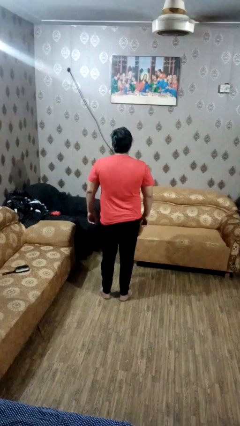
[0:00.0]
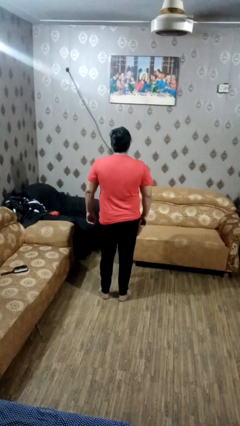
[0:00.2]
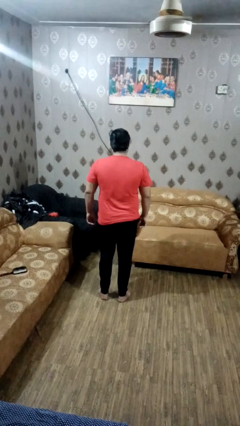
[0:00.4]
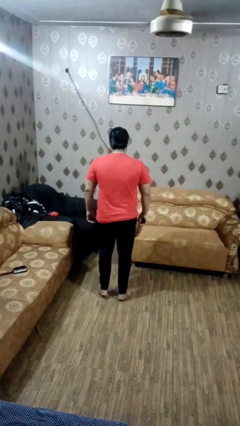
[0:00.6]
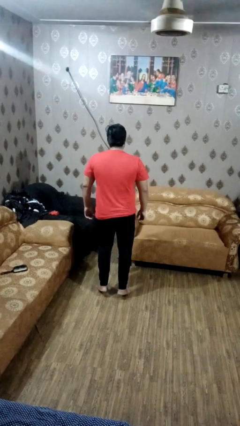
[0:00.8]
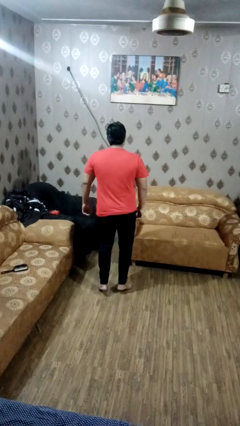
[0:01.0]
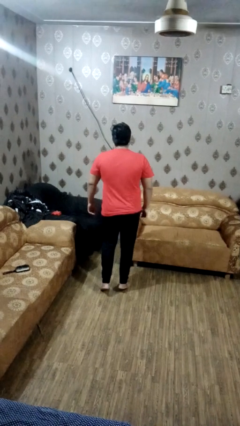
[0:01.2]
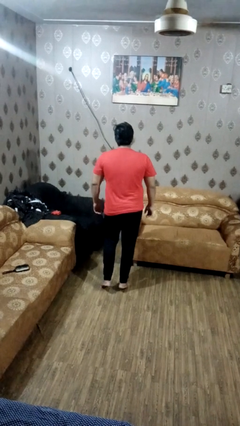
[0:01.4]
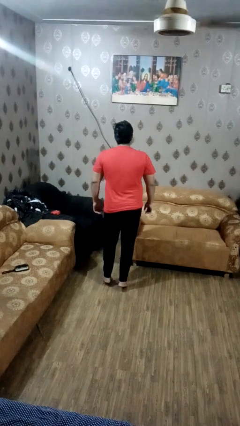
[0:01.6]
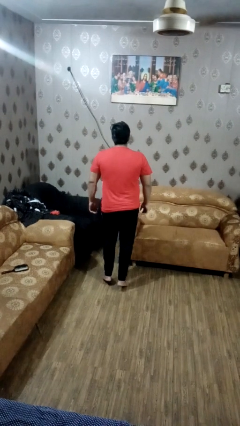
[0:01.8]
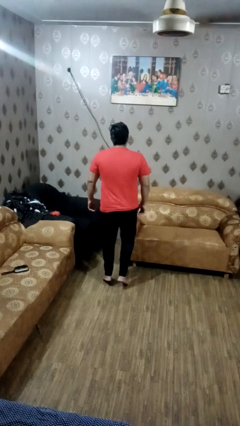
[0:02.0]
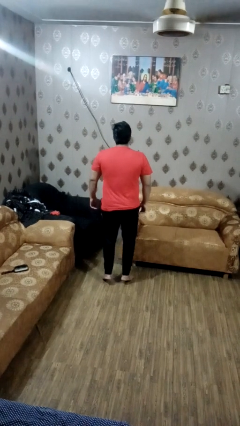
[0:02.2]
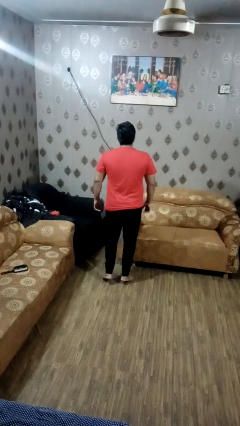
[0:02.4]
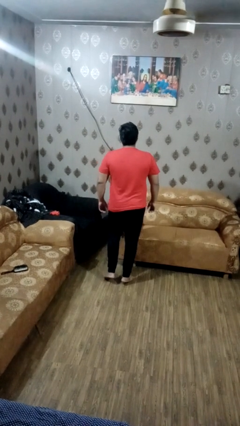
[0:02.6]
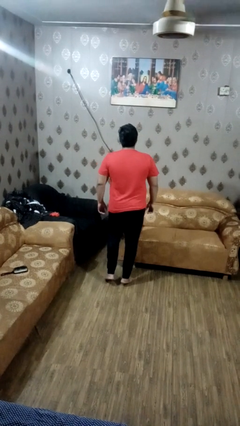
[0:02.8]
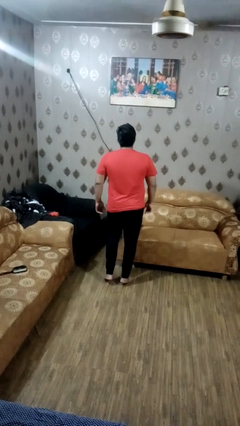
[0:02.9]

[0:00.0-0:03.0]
person walks tiptoe

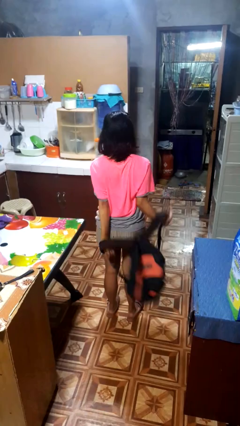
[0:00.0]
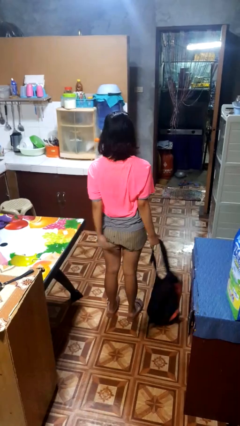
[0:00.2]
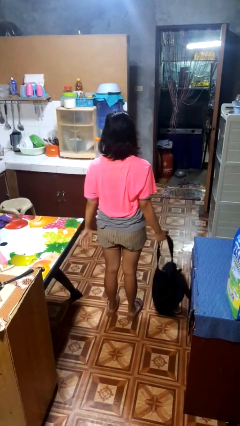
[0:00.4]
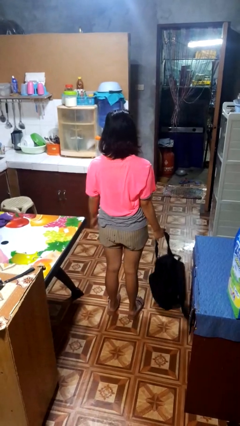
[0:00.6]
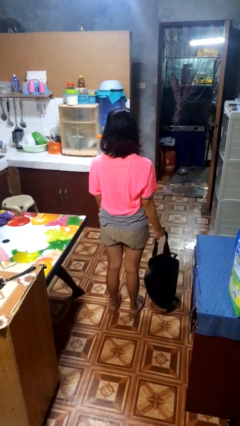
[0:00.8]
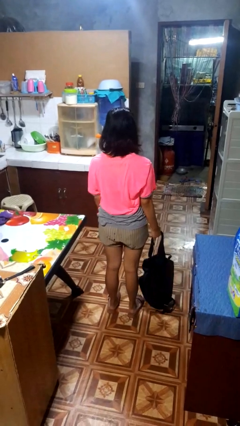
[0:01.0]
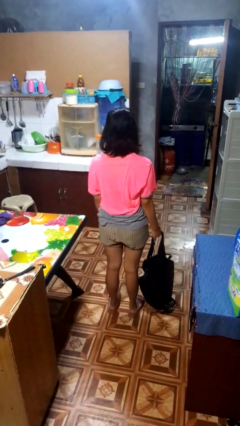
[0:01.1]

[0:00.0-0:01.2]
person takes off backpack

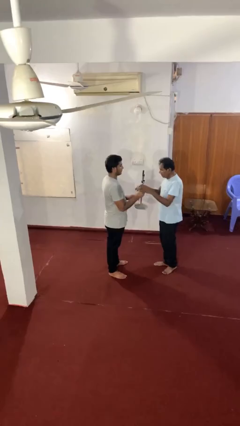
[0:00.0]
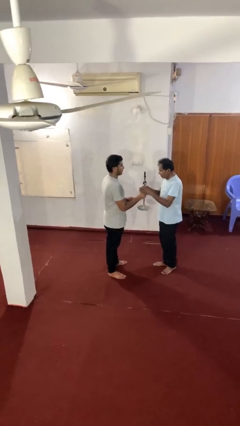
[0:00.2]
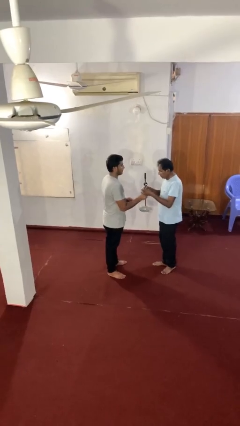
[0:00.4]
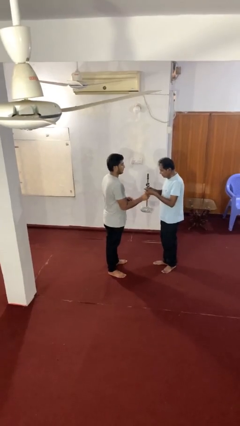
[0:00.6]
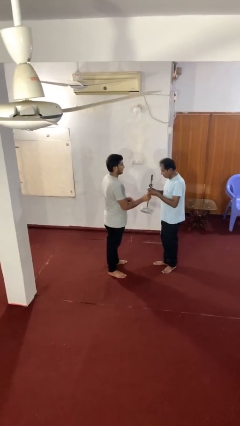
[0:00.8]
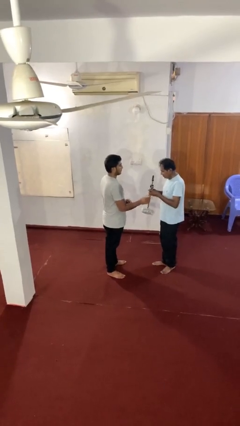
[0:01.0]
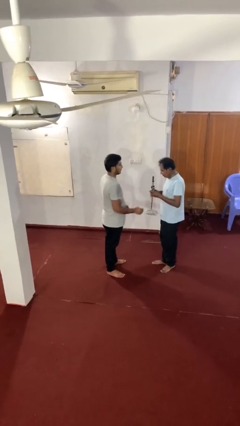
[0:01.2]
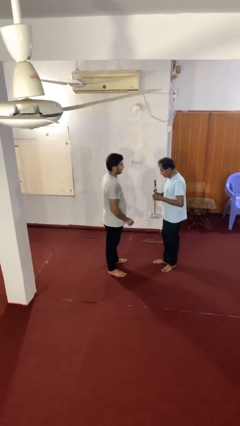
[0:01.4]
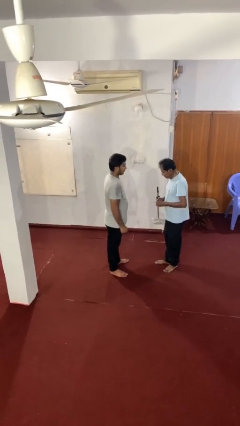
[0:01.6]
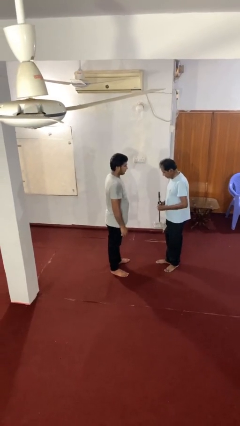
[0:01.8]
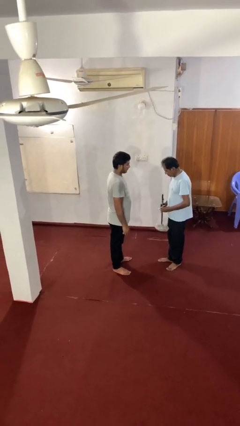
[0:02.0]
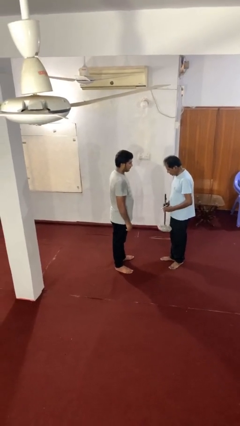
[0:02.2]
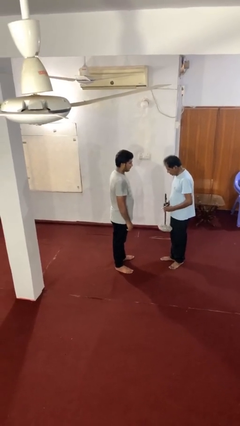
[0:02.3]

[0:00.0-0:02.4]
person transfers object to person

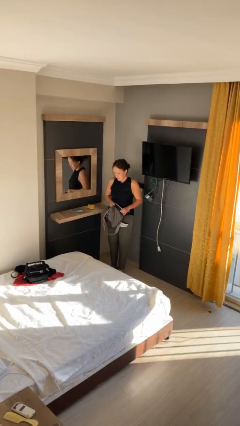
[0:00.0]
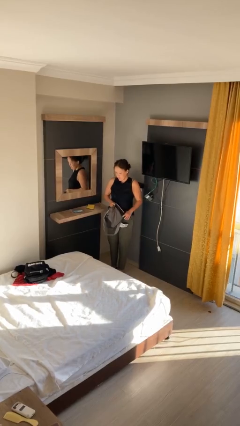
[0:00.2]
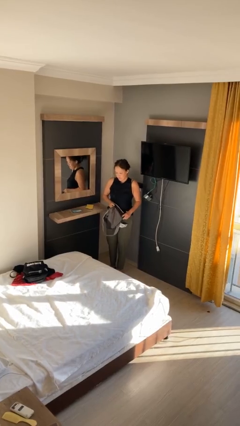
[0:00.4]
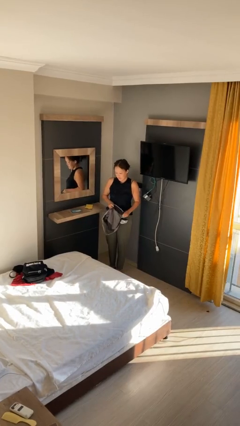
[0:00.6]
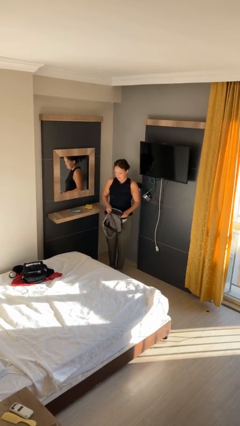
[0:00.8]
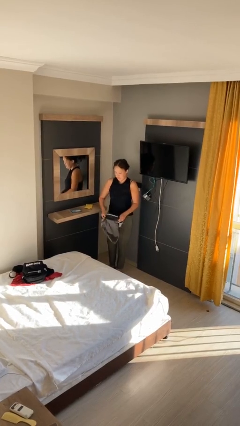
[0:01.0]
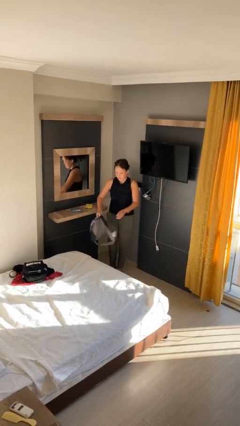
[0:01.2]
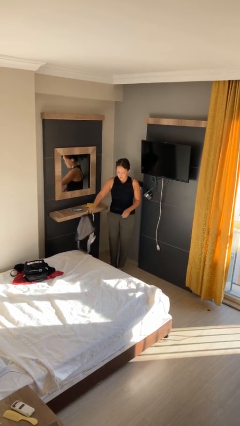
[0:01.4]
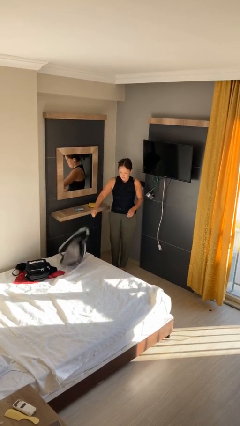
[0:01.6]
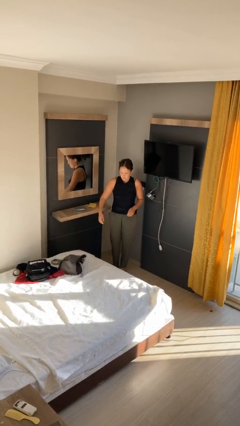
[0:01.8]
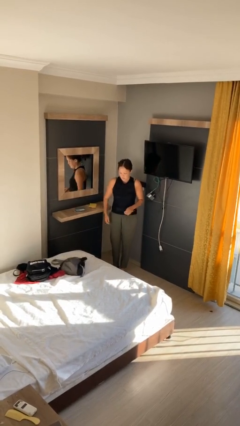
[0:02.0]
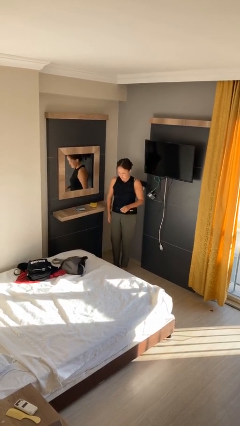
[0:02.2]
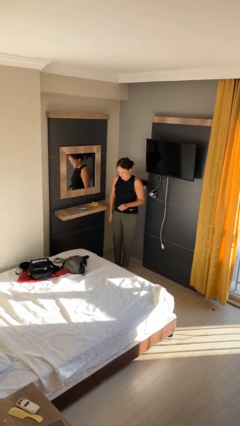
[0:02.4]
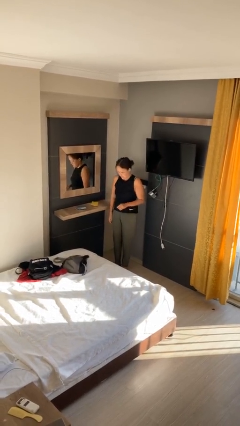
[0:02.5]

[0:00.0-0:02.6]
person throws object on bed

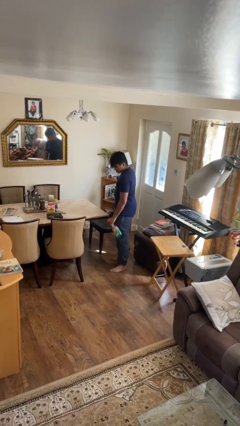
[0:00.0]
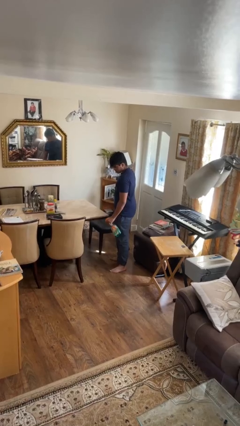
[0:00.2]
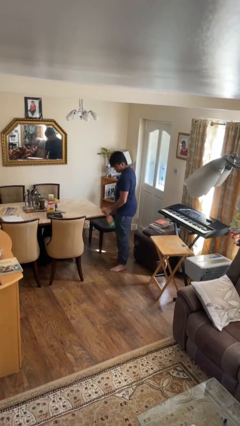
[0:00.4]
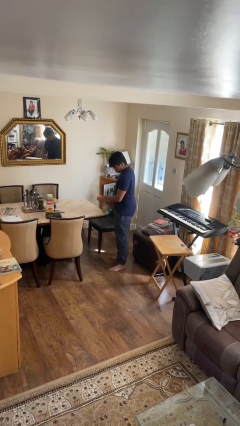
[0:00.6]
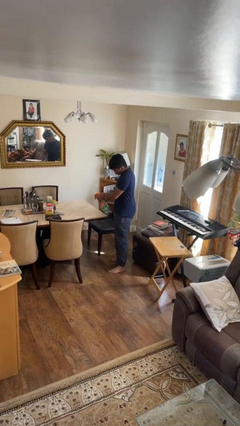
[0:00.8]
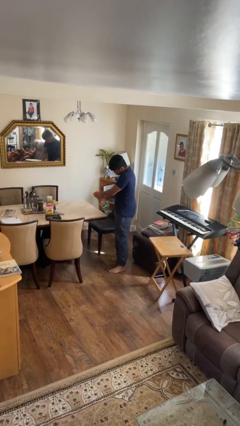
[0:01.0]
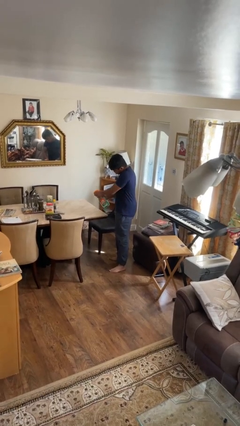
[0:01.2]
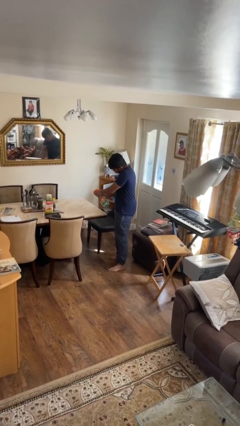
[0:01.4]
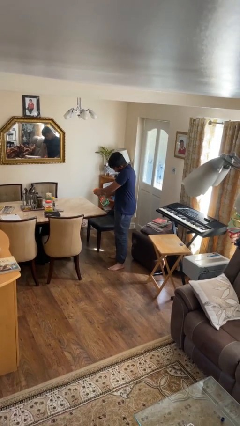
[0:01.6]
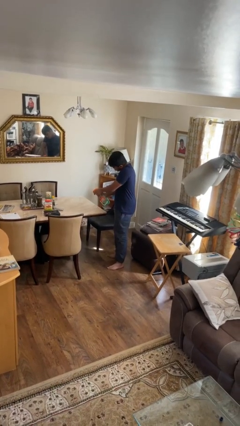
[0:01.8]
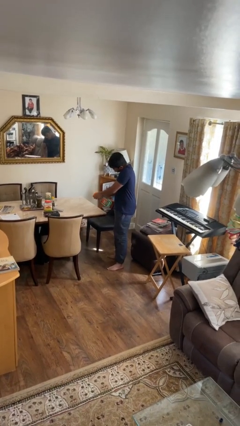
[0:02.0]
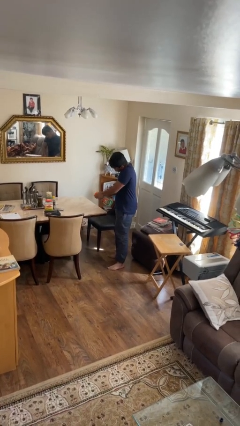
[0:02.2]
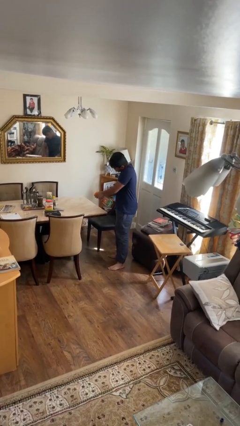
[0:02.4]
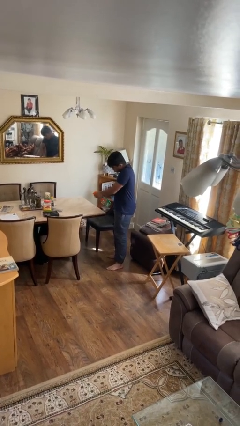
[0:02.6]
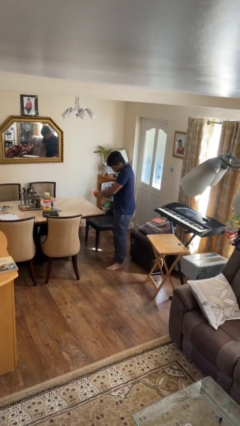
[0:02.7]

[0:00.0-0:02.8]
person sprays from bottle

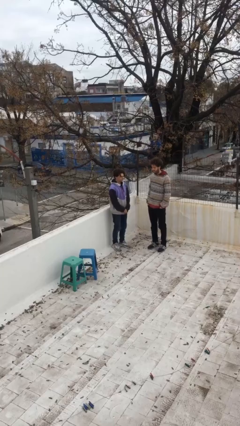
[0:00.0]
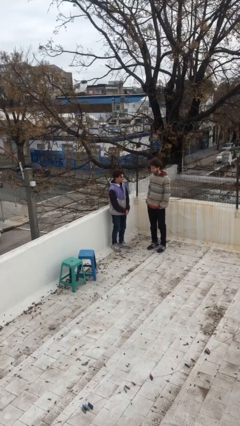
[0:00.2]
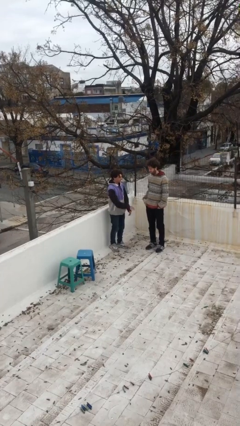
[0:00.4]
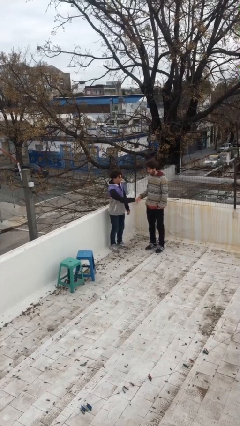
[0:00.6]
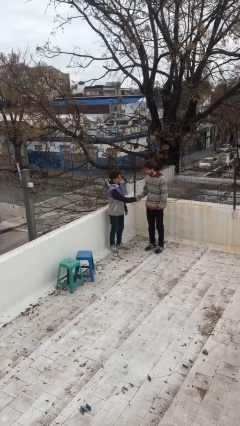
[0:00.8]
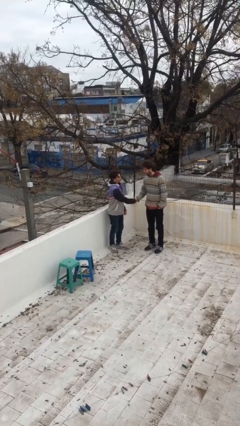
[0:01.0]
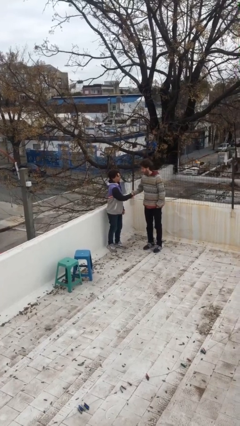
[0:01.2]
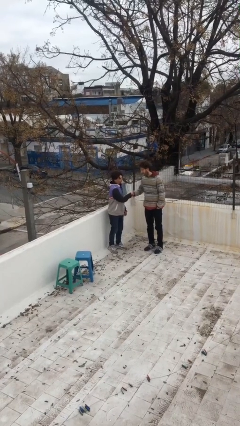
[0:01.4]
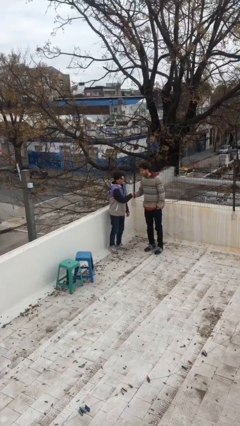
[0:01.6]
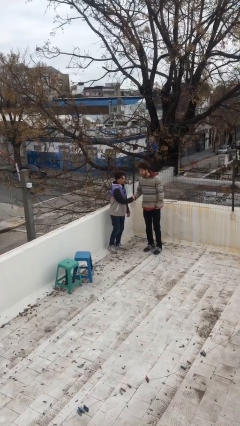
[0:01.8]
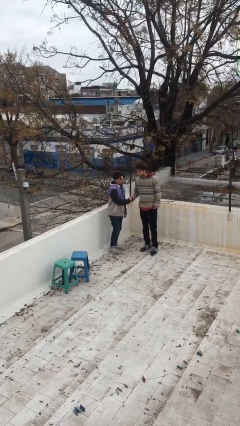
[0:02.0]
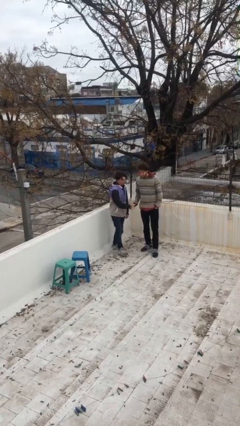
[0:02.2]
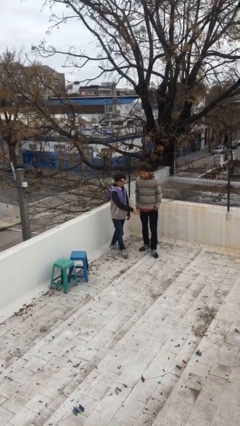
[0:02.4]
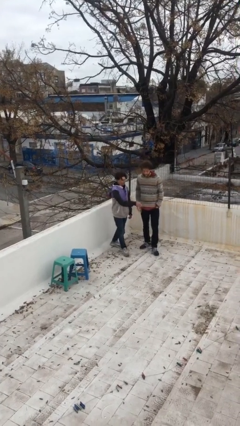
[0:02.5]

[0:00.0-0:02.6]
person shakes hand

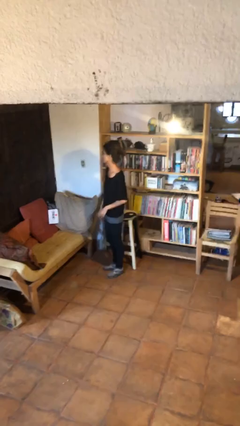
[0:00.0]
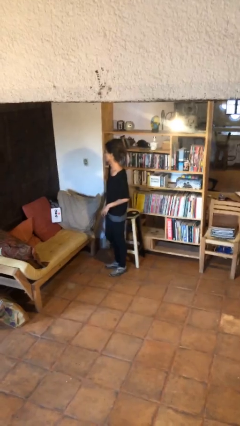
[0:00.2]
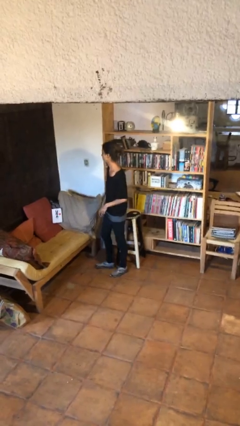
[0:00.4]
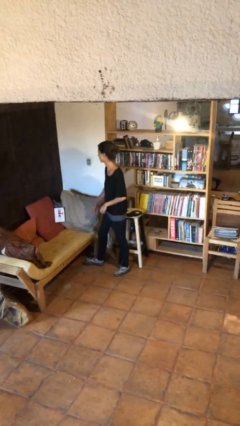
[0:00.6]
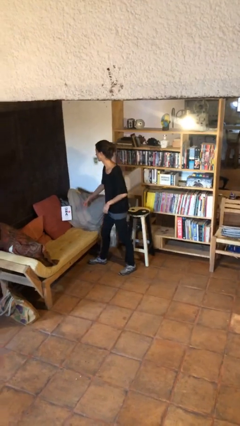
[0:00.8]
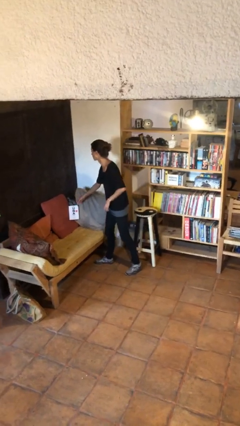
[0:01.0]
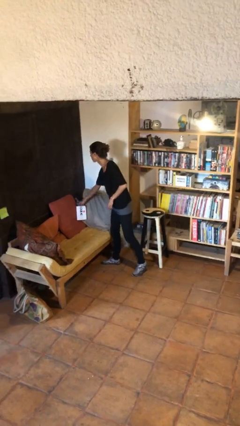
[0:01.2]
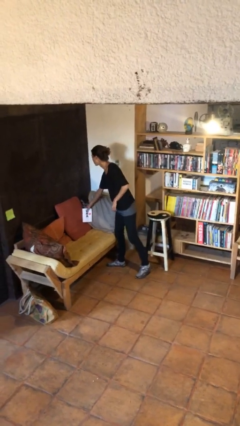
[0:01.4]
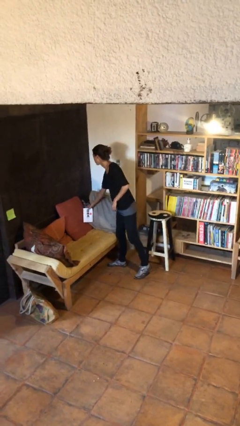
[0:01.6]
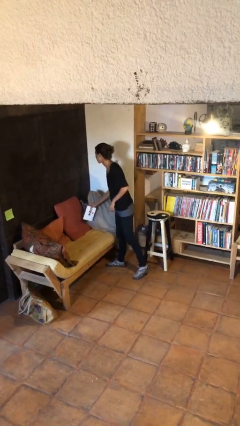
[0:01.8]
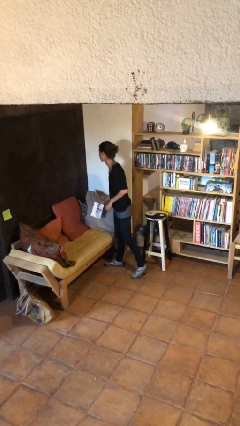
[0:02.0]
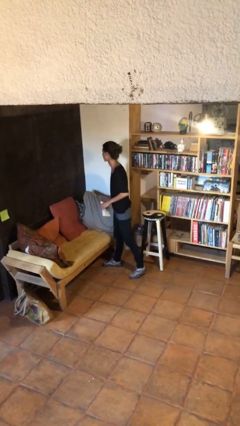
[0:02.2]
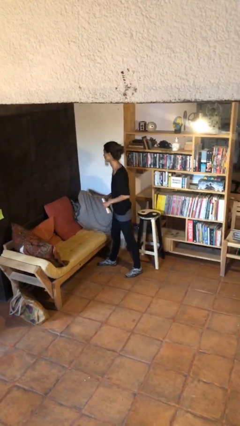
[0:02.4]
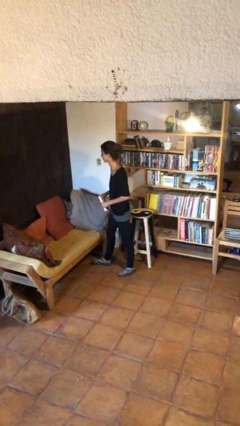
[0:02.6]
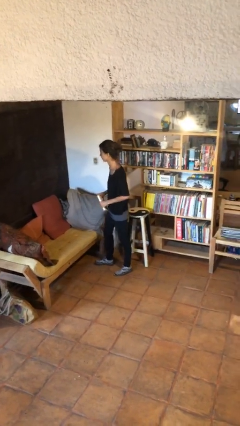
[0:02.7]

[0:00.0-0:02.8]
person picks up object from couch
